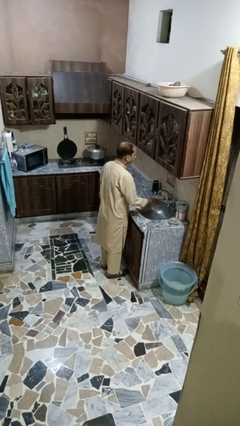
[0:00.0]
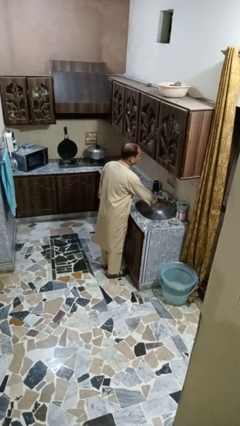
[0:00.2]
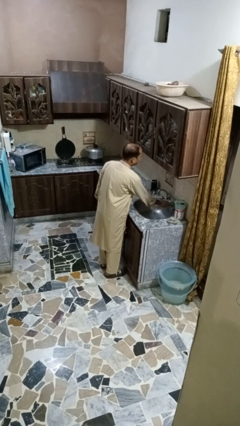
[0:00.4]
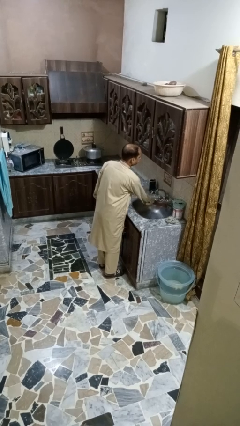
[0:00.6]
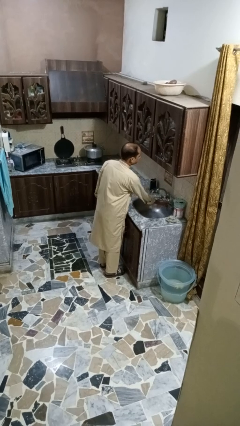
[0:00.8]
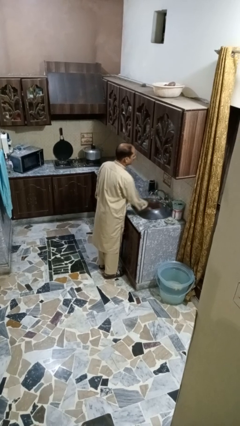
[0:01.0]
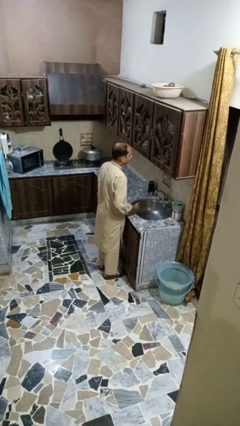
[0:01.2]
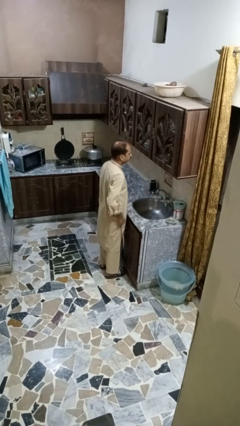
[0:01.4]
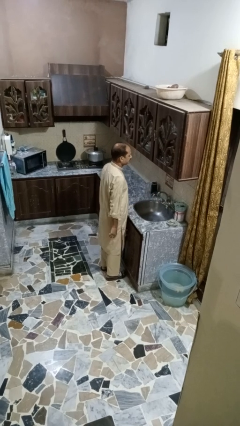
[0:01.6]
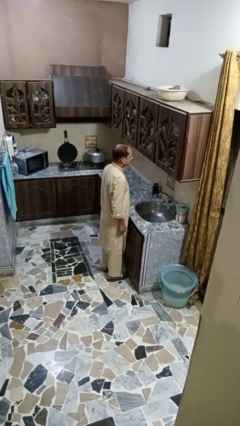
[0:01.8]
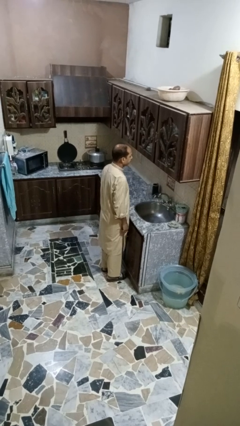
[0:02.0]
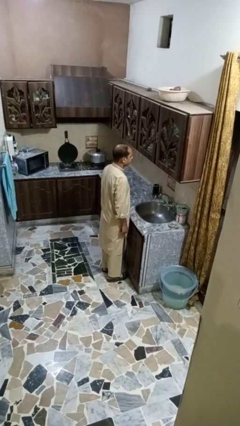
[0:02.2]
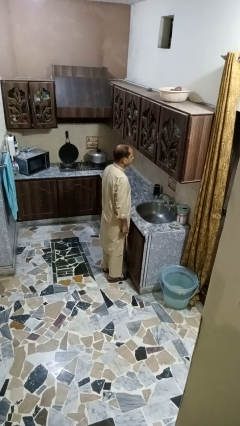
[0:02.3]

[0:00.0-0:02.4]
person turns off faucet

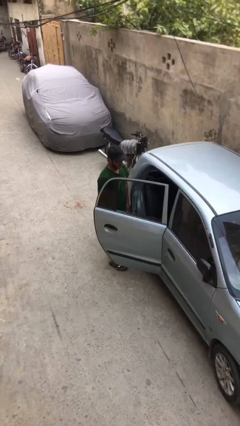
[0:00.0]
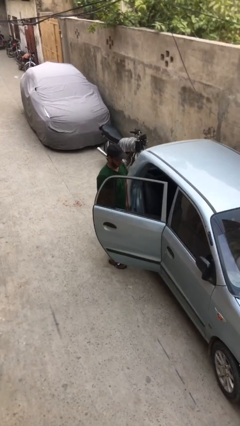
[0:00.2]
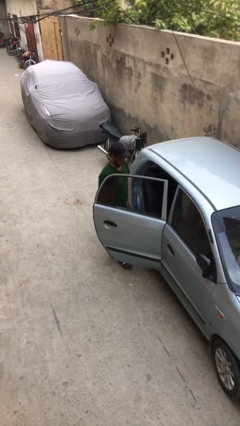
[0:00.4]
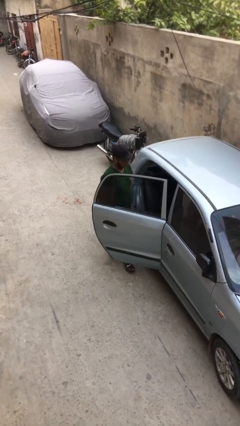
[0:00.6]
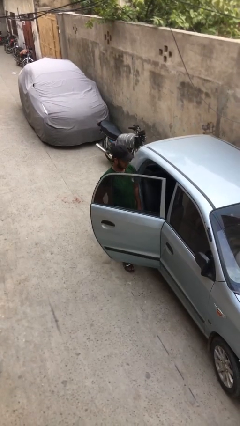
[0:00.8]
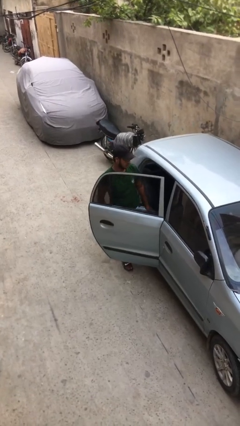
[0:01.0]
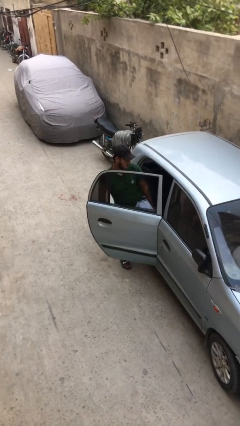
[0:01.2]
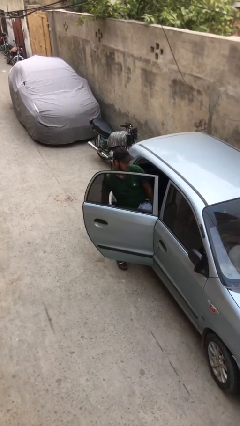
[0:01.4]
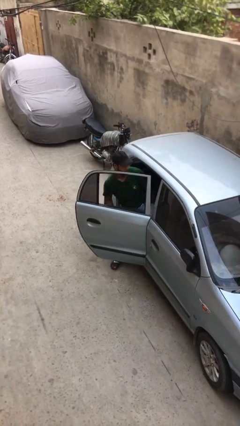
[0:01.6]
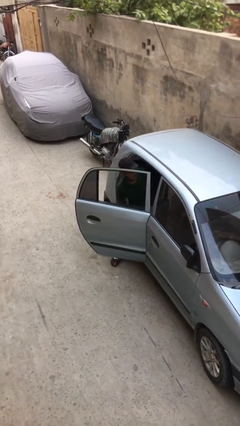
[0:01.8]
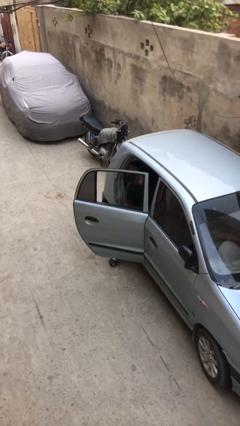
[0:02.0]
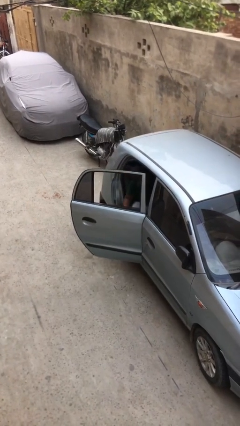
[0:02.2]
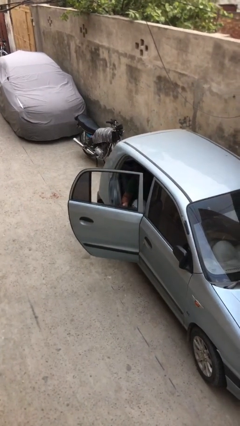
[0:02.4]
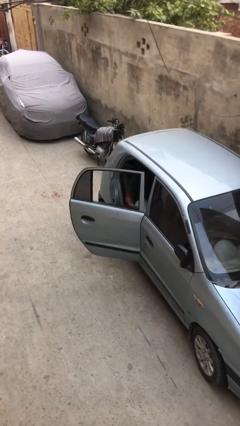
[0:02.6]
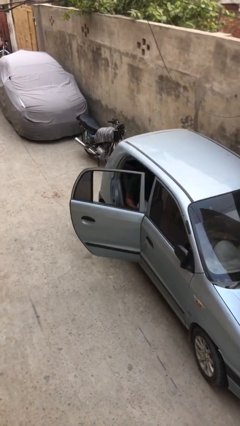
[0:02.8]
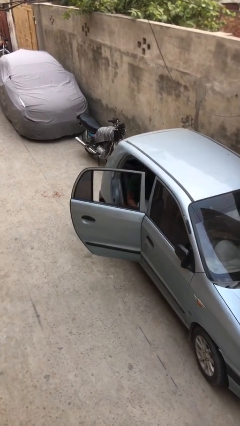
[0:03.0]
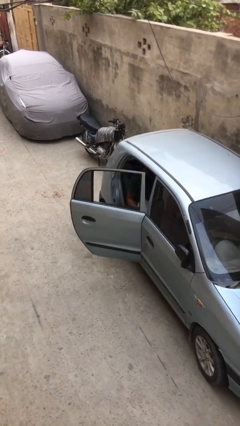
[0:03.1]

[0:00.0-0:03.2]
person enters car

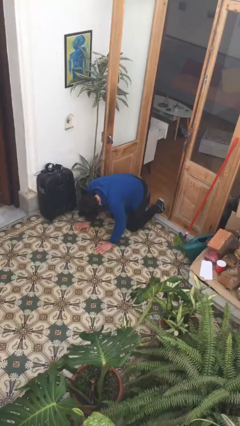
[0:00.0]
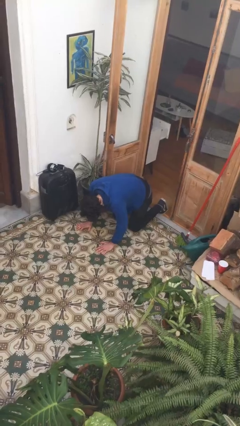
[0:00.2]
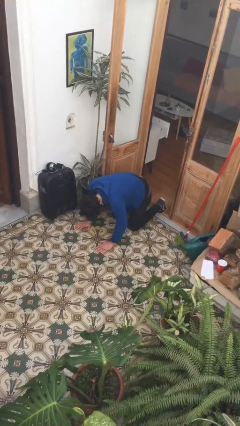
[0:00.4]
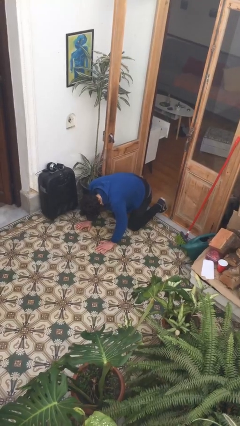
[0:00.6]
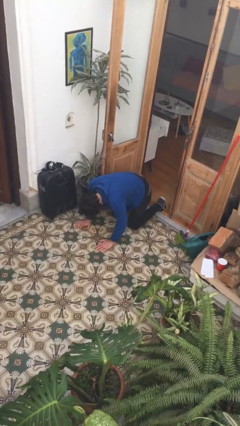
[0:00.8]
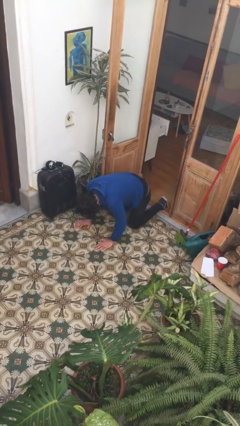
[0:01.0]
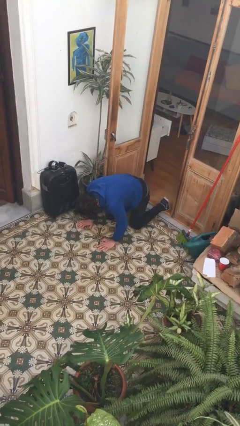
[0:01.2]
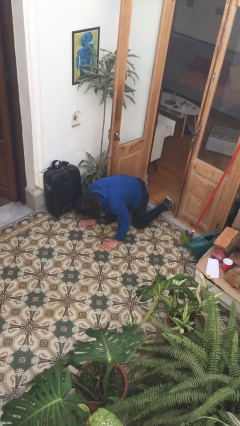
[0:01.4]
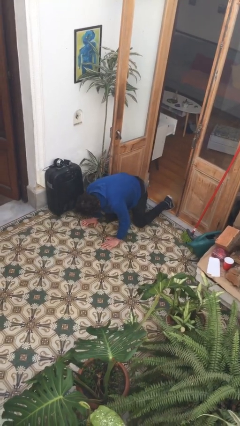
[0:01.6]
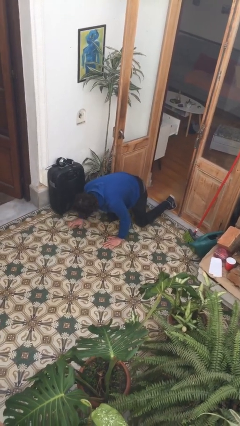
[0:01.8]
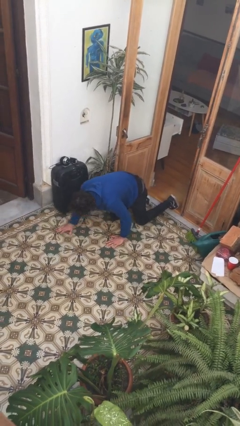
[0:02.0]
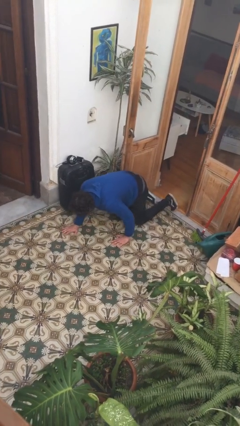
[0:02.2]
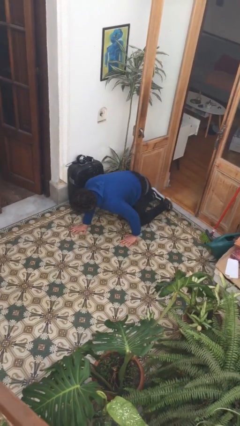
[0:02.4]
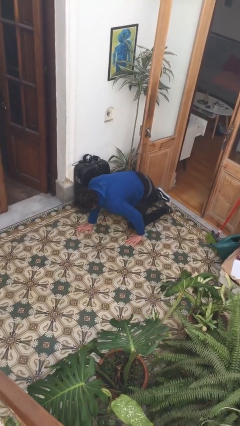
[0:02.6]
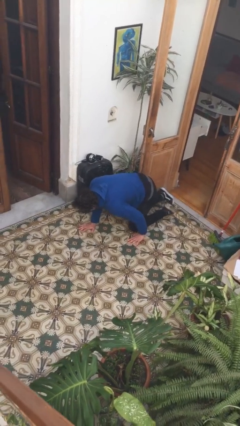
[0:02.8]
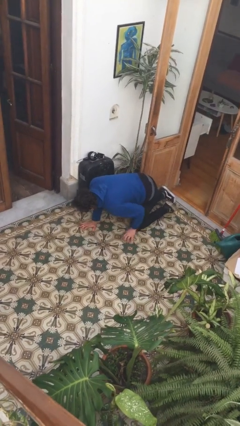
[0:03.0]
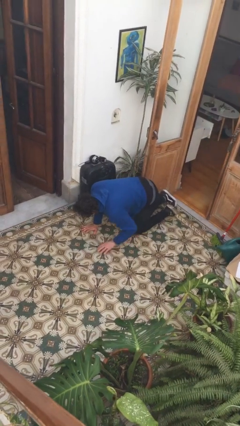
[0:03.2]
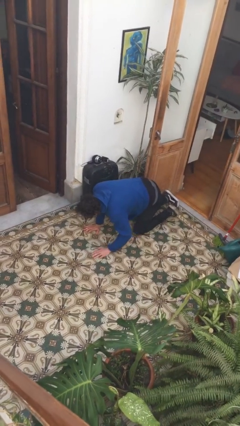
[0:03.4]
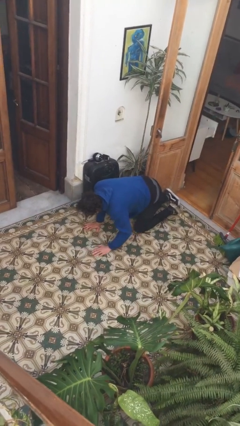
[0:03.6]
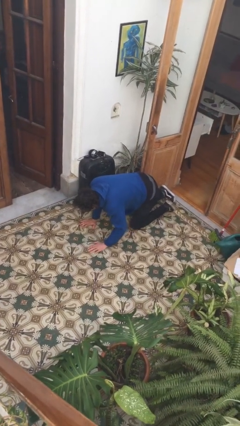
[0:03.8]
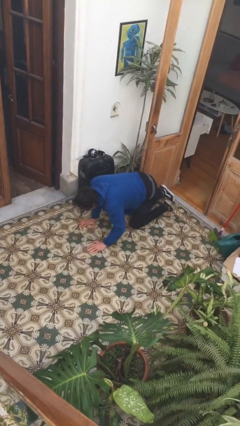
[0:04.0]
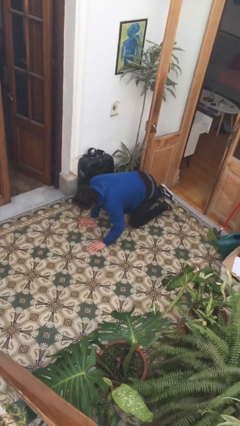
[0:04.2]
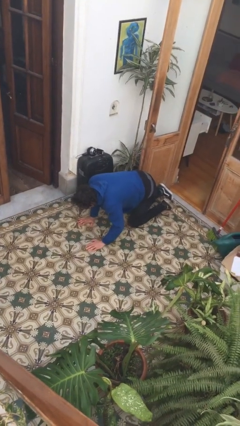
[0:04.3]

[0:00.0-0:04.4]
person crawls

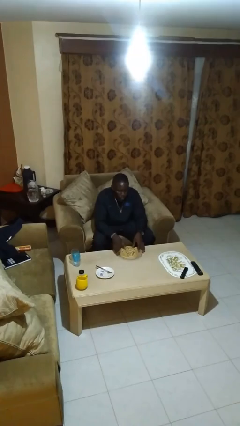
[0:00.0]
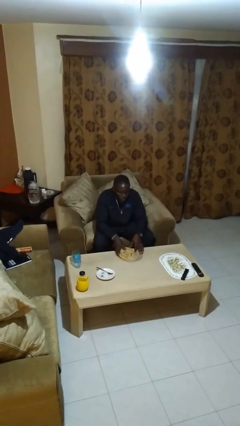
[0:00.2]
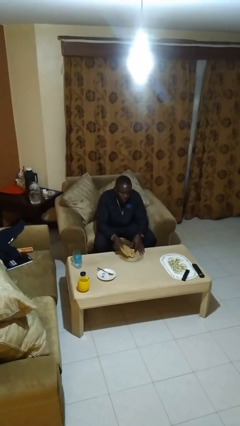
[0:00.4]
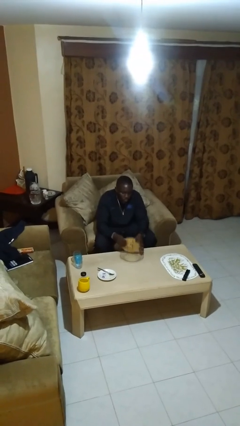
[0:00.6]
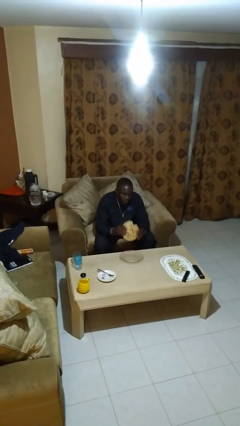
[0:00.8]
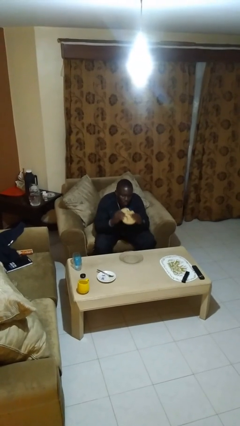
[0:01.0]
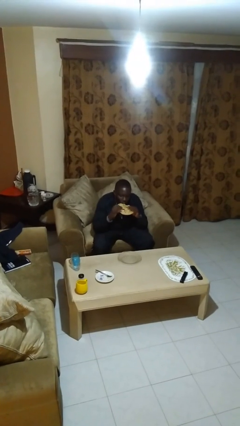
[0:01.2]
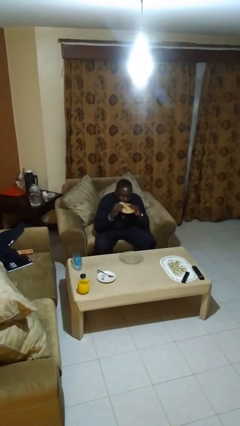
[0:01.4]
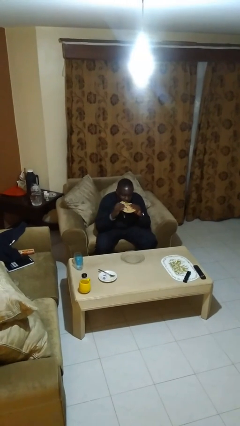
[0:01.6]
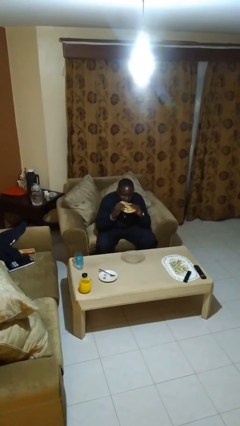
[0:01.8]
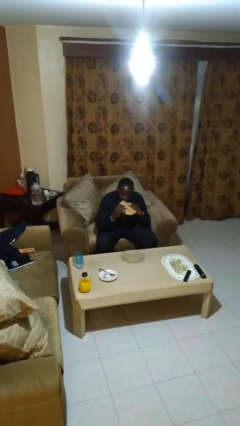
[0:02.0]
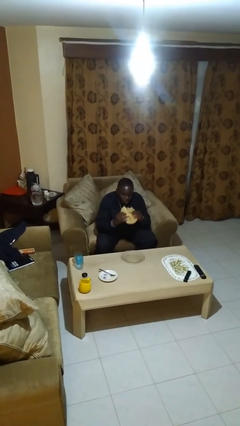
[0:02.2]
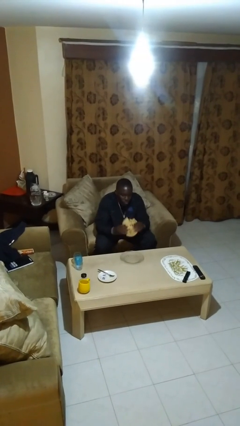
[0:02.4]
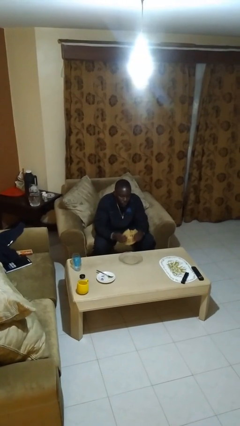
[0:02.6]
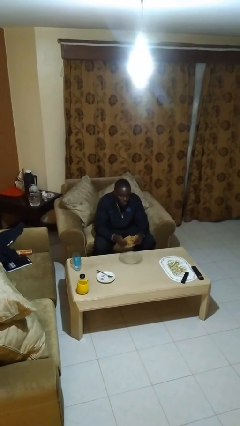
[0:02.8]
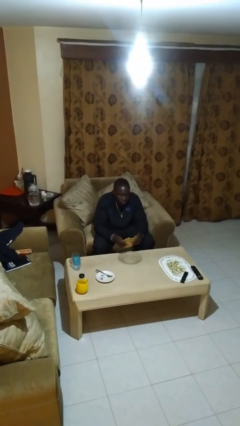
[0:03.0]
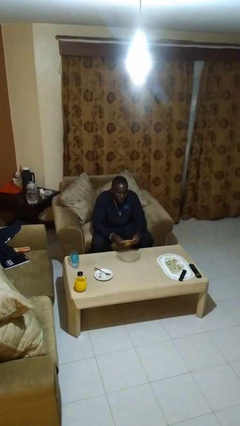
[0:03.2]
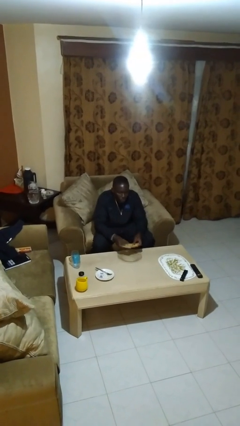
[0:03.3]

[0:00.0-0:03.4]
person eats with hands

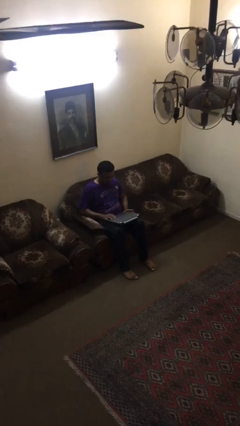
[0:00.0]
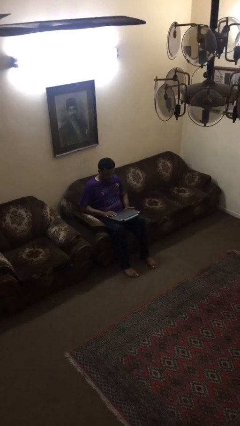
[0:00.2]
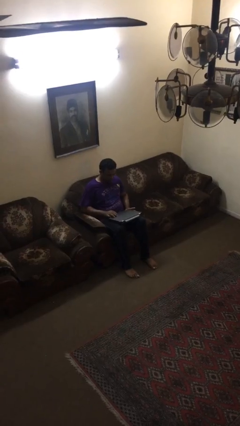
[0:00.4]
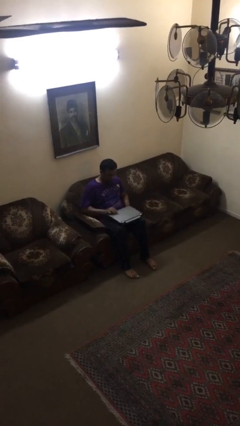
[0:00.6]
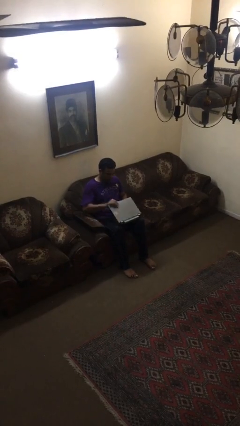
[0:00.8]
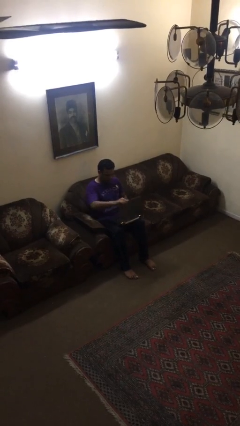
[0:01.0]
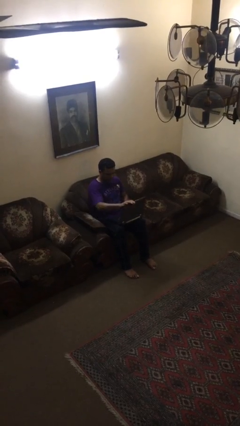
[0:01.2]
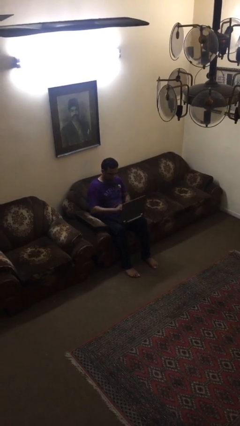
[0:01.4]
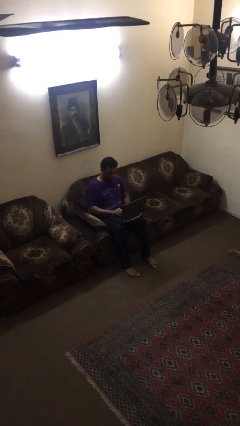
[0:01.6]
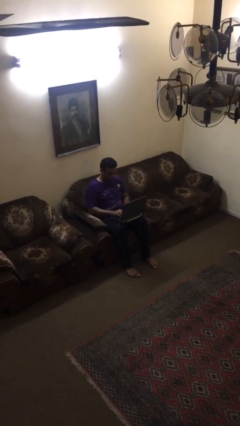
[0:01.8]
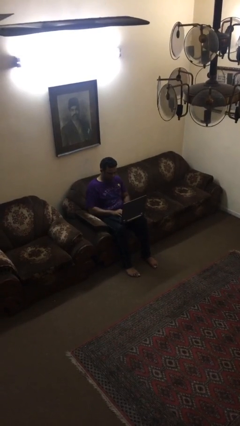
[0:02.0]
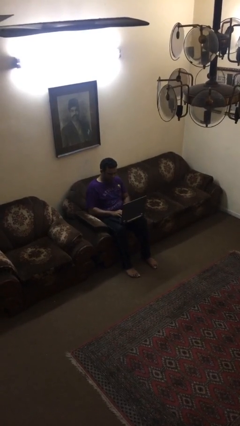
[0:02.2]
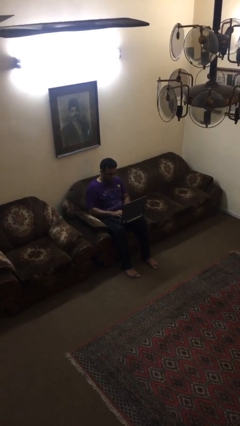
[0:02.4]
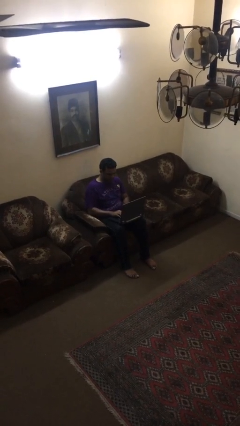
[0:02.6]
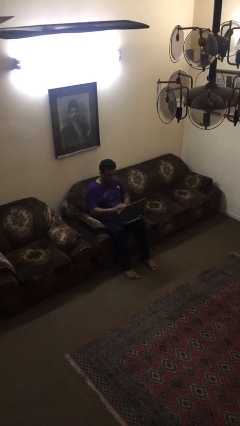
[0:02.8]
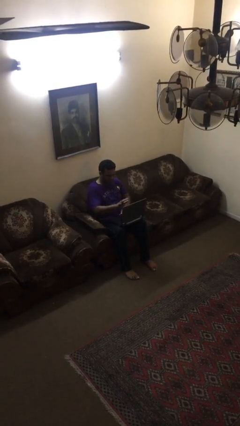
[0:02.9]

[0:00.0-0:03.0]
person interacts with laptop

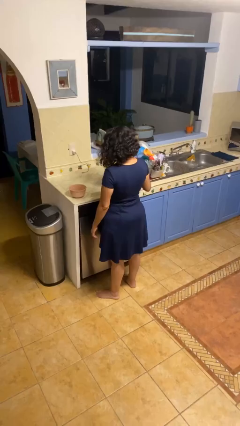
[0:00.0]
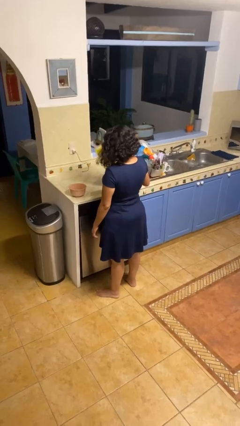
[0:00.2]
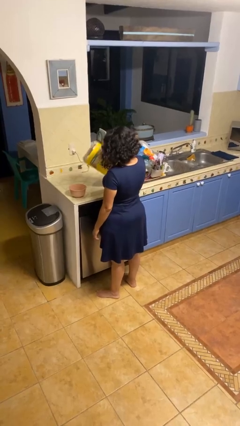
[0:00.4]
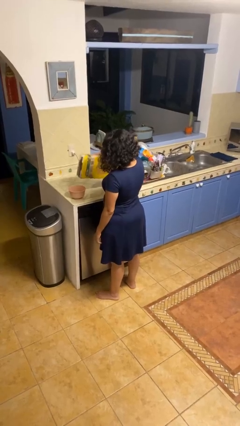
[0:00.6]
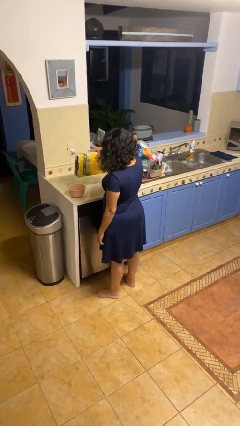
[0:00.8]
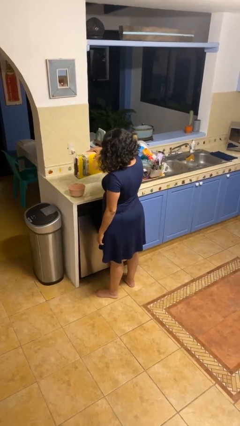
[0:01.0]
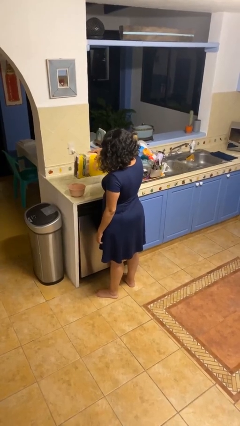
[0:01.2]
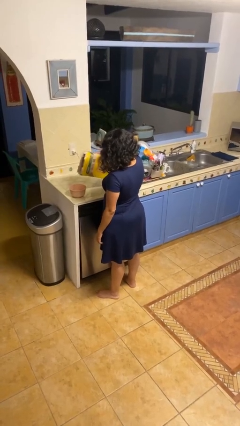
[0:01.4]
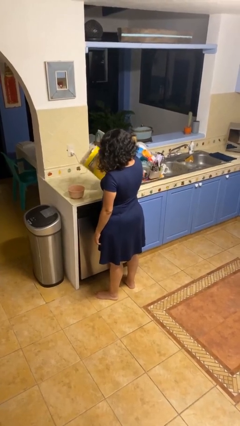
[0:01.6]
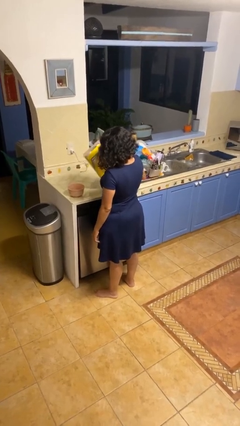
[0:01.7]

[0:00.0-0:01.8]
person pours into bowl
